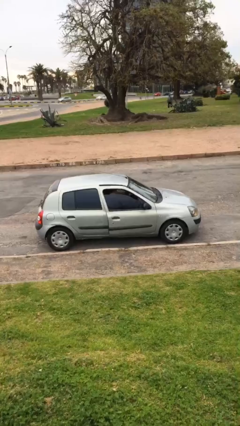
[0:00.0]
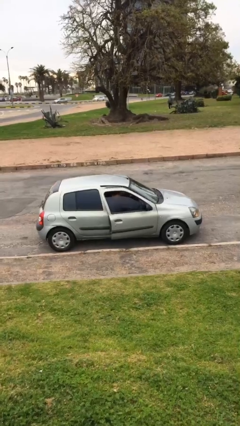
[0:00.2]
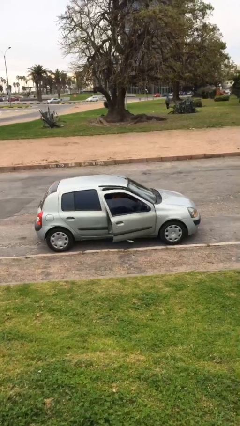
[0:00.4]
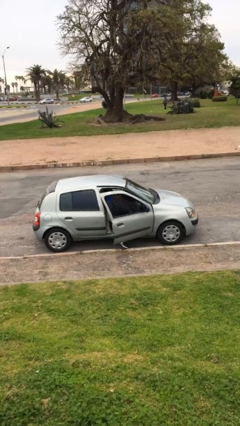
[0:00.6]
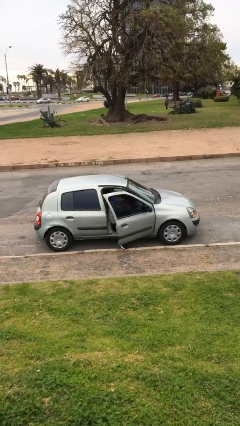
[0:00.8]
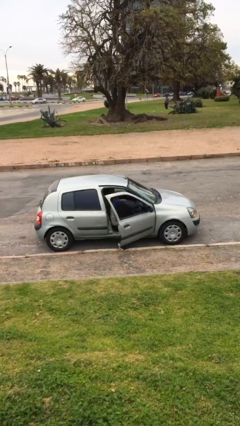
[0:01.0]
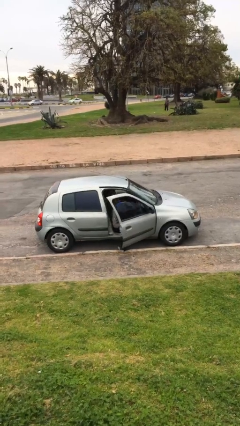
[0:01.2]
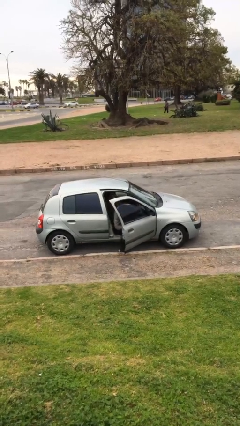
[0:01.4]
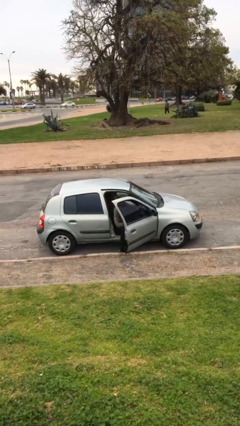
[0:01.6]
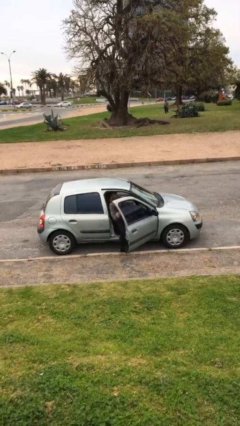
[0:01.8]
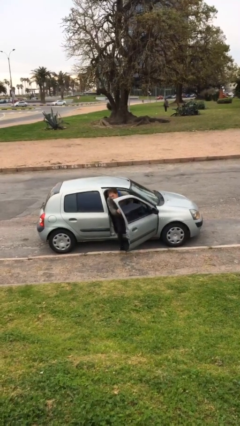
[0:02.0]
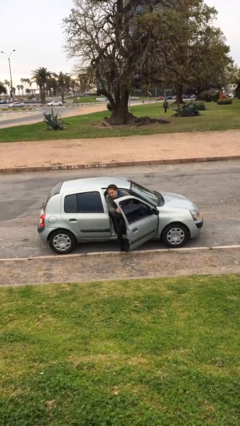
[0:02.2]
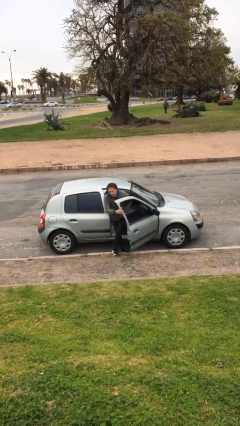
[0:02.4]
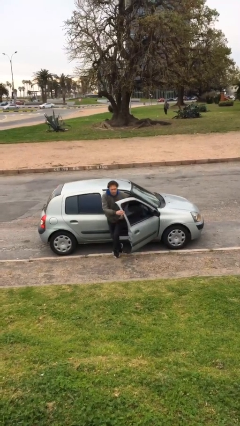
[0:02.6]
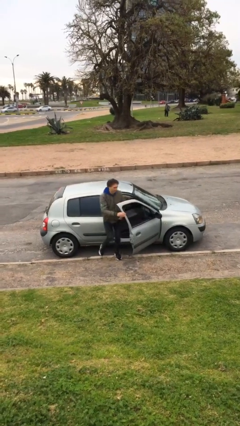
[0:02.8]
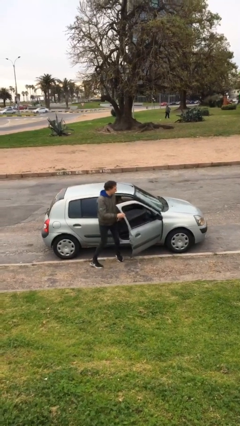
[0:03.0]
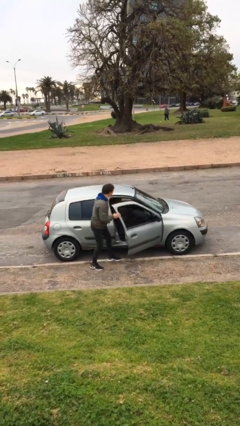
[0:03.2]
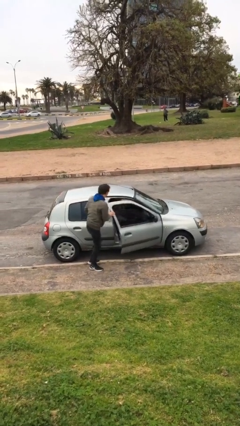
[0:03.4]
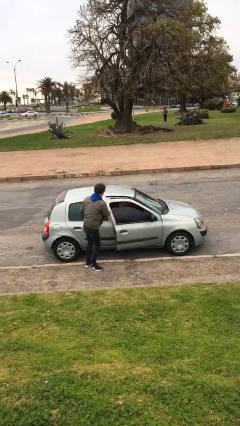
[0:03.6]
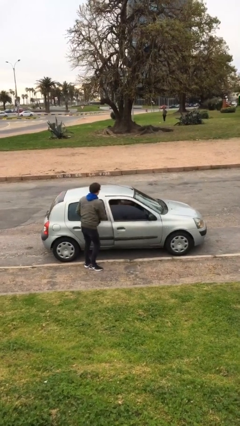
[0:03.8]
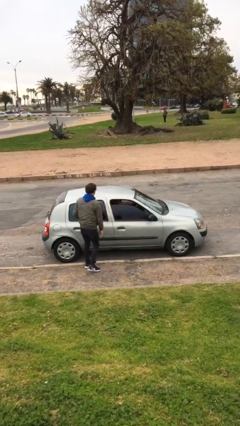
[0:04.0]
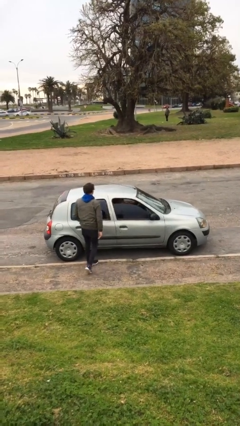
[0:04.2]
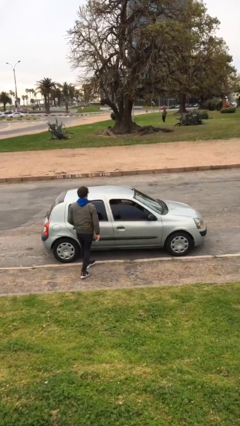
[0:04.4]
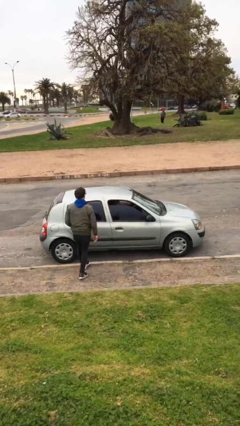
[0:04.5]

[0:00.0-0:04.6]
car picks up person

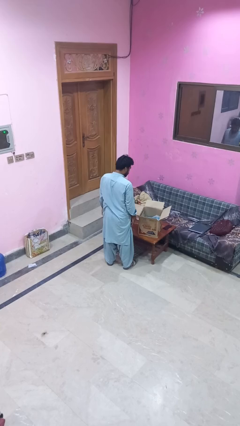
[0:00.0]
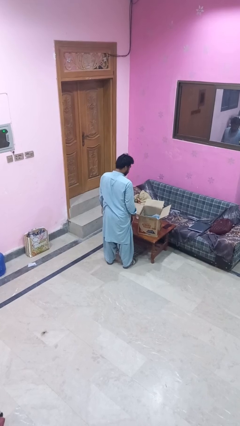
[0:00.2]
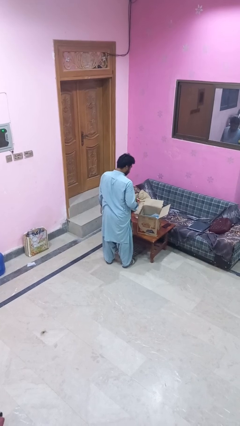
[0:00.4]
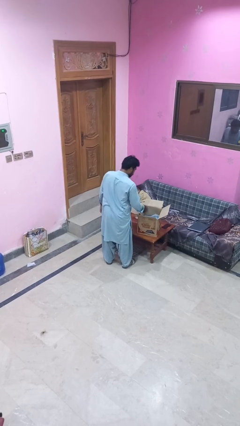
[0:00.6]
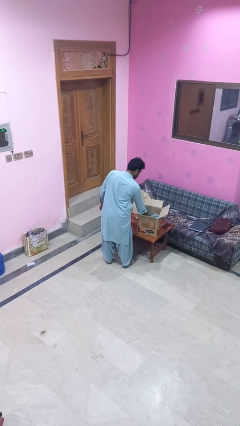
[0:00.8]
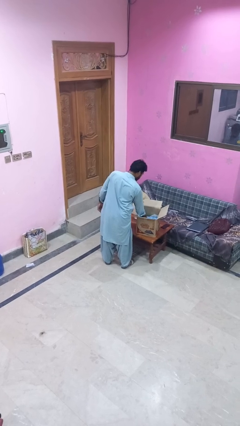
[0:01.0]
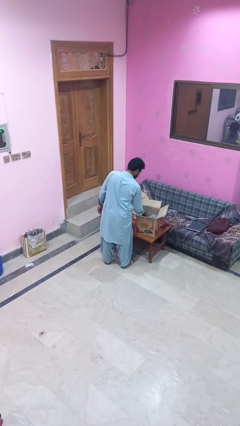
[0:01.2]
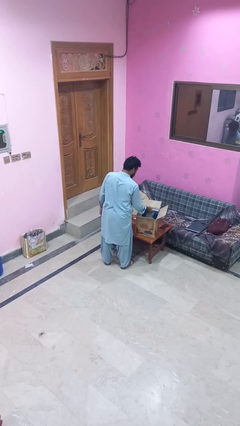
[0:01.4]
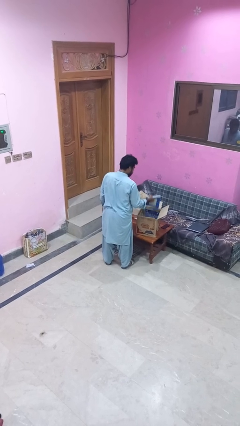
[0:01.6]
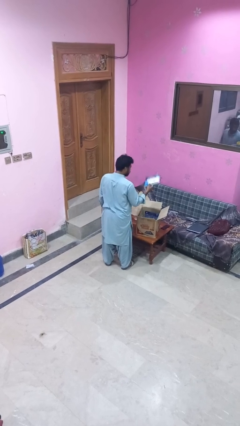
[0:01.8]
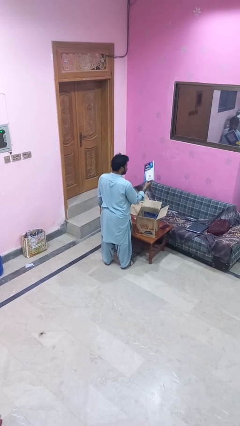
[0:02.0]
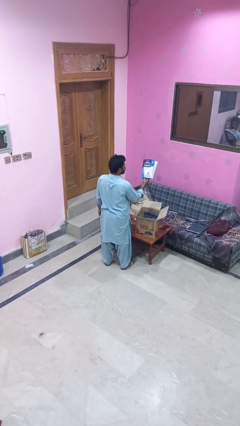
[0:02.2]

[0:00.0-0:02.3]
person takes object from box

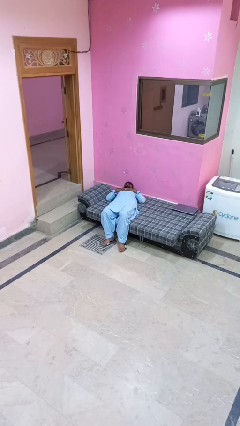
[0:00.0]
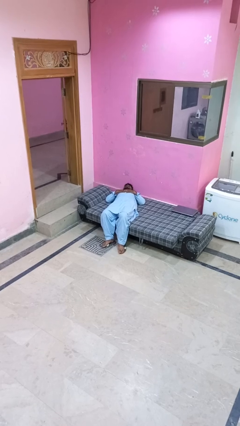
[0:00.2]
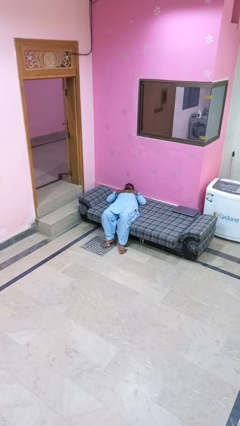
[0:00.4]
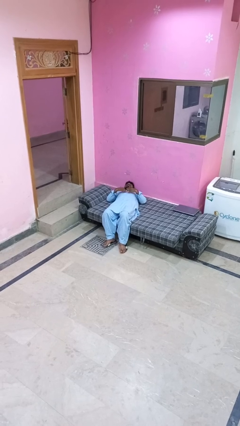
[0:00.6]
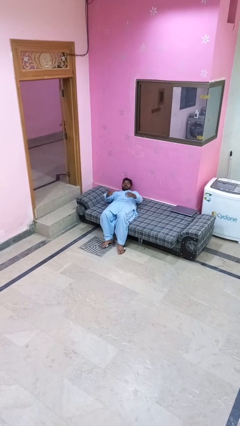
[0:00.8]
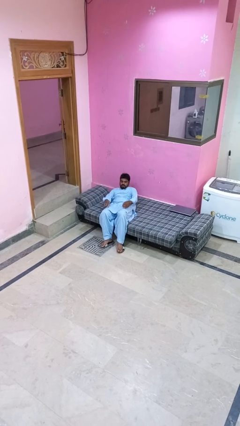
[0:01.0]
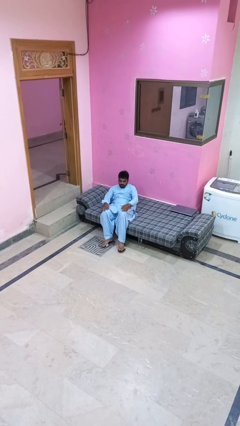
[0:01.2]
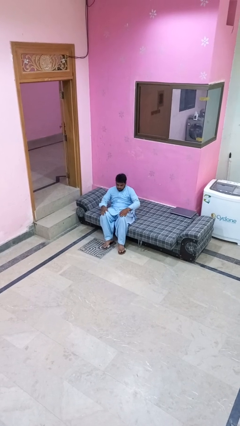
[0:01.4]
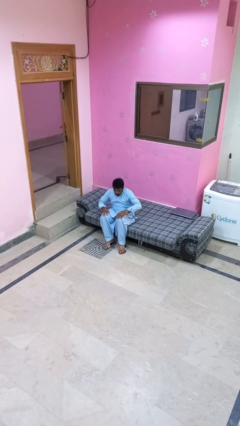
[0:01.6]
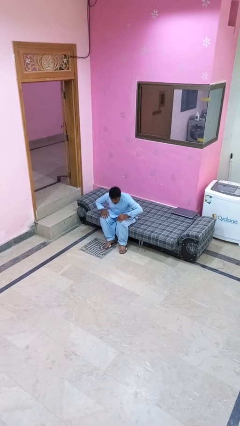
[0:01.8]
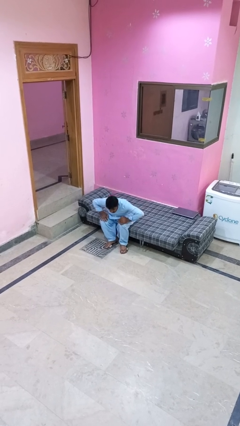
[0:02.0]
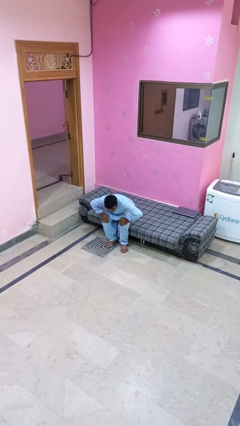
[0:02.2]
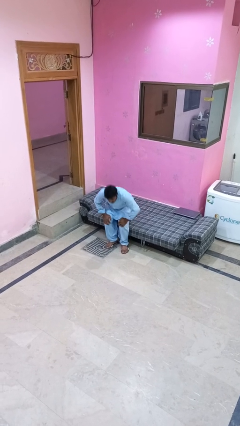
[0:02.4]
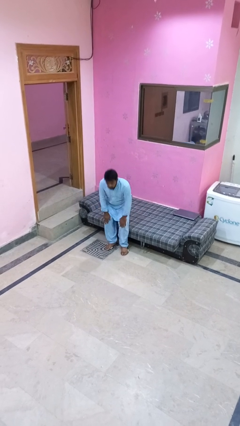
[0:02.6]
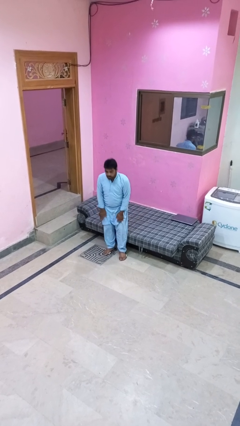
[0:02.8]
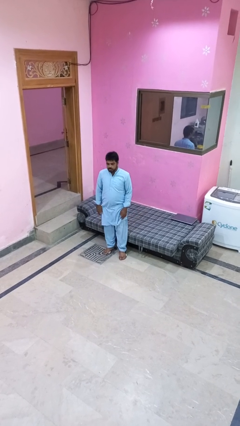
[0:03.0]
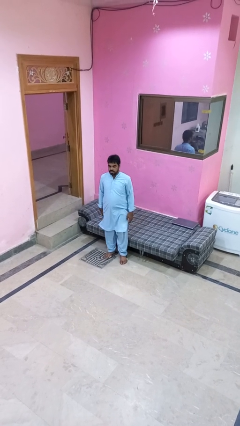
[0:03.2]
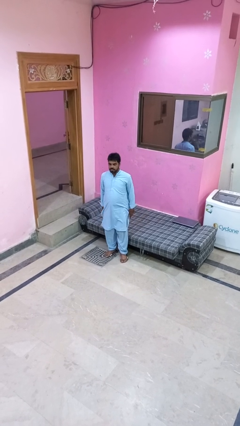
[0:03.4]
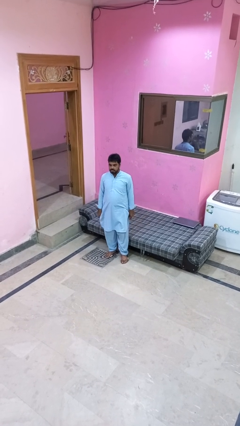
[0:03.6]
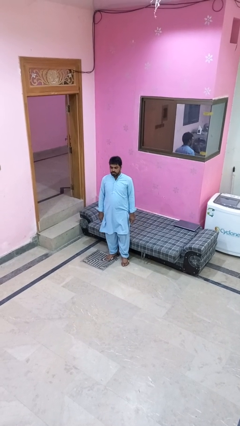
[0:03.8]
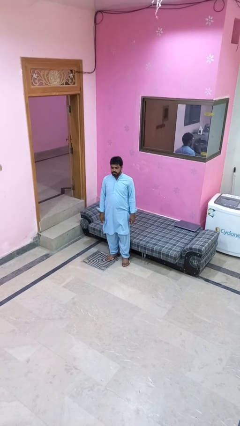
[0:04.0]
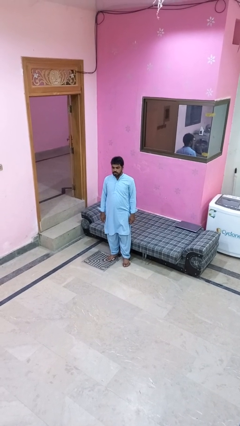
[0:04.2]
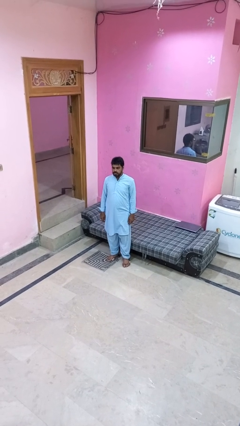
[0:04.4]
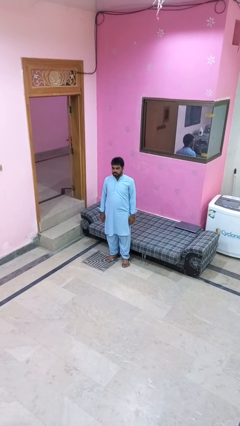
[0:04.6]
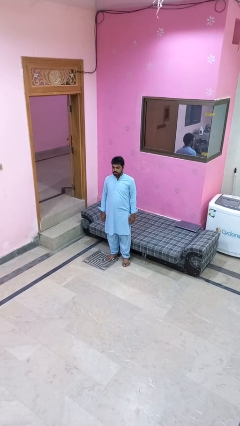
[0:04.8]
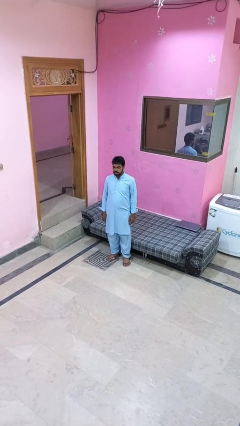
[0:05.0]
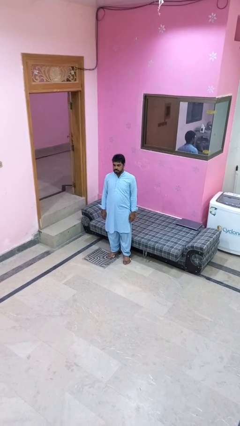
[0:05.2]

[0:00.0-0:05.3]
person stands up

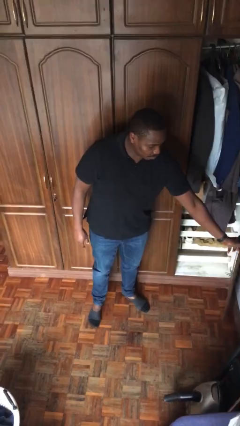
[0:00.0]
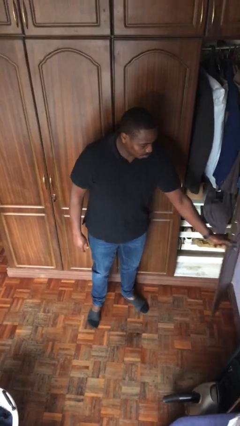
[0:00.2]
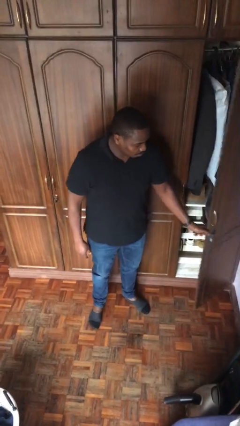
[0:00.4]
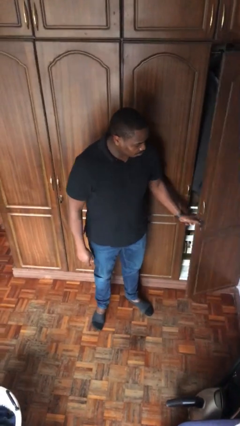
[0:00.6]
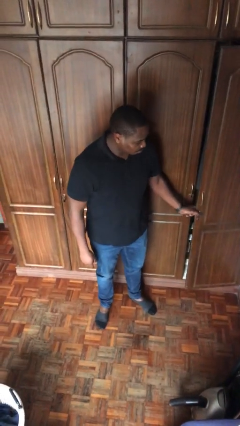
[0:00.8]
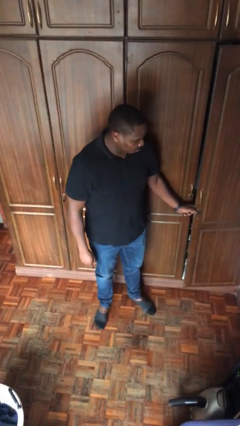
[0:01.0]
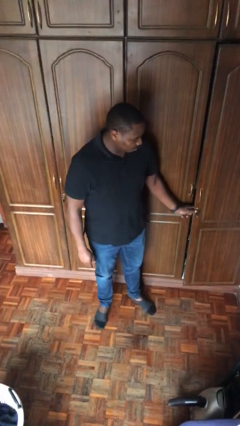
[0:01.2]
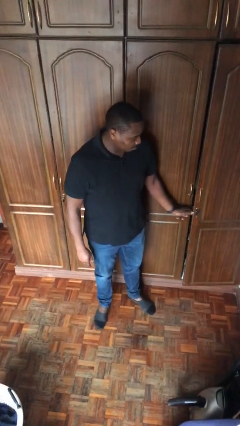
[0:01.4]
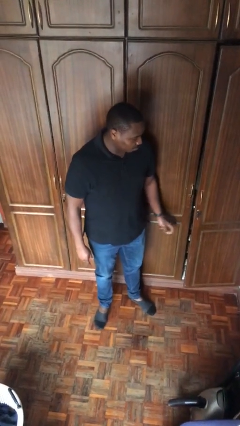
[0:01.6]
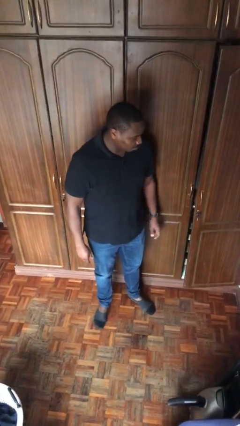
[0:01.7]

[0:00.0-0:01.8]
person closes closet door

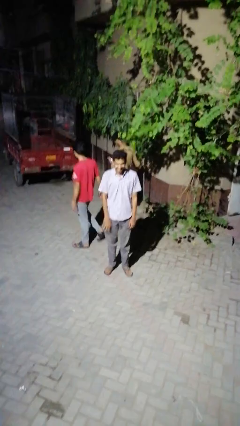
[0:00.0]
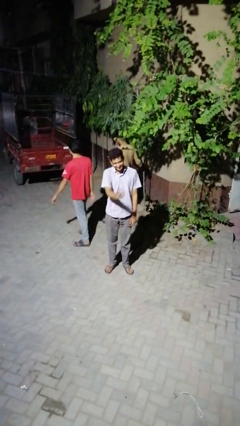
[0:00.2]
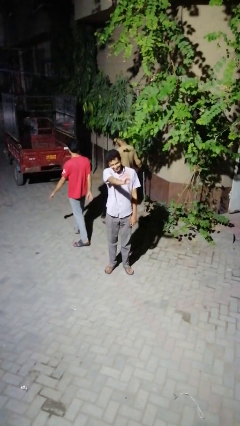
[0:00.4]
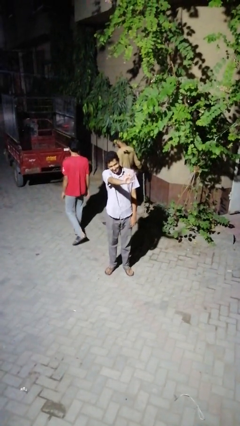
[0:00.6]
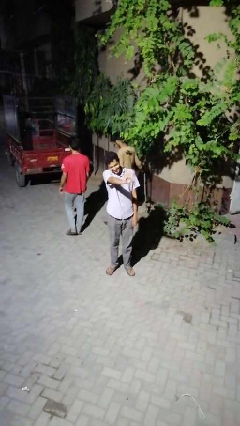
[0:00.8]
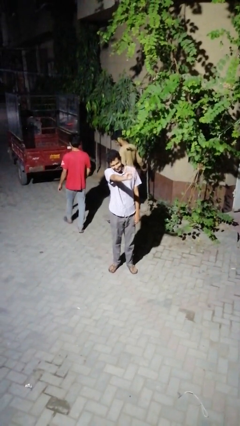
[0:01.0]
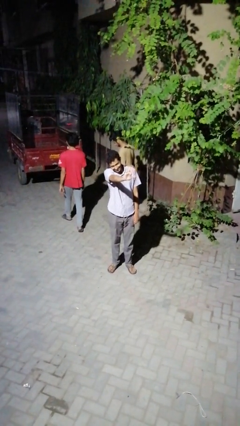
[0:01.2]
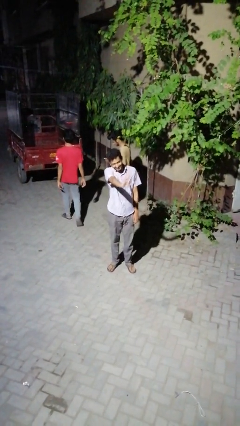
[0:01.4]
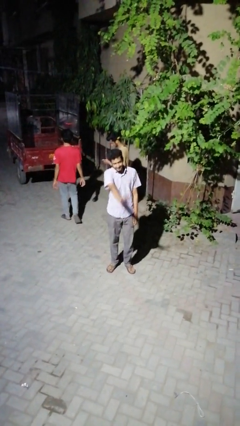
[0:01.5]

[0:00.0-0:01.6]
person waves at person

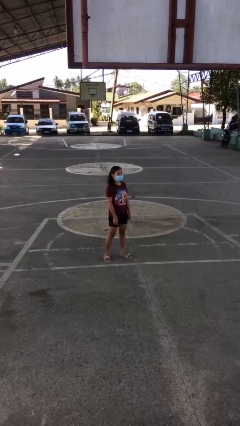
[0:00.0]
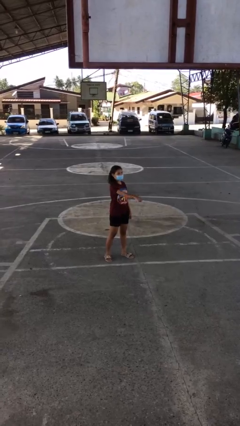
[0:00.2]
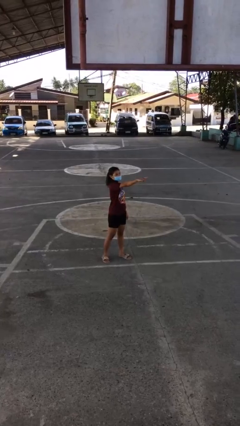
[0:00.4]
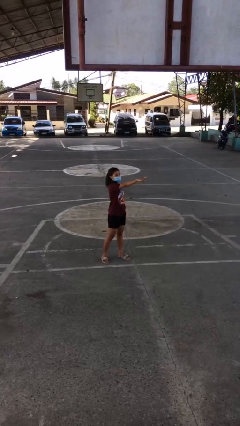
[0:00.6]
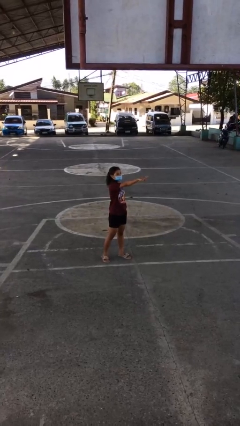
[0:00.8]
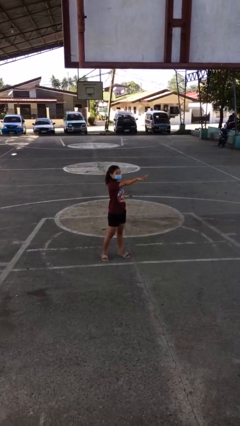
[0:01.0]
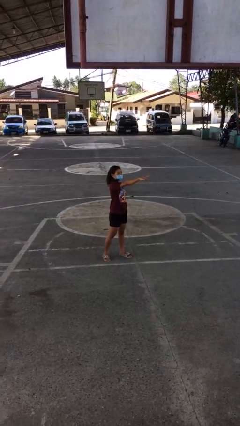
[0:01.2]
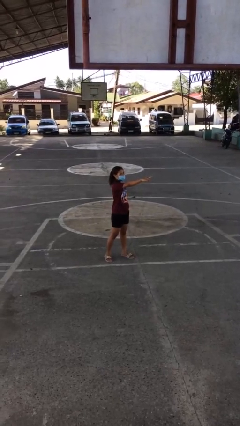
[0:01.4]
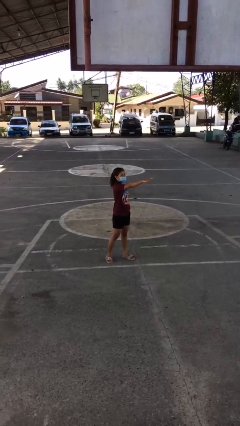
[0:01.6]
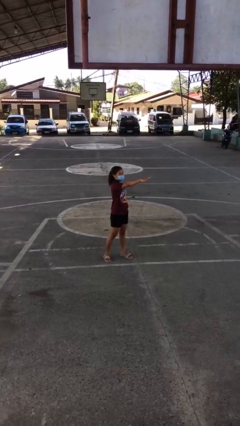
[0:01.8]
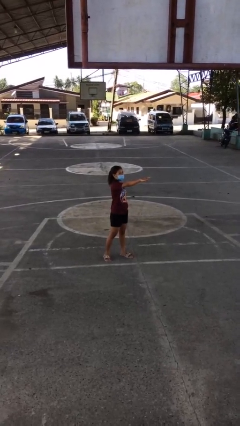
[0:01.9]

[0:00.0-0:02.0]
person points at person
